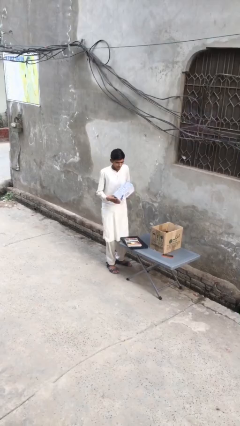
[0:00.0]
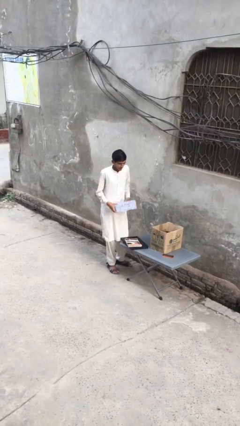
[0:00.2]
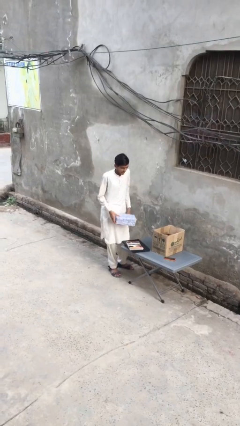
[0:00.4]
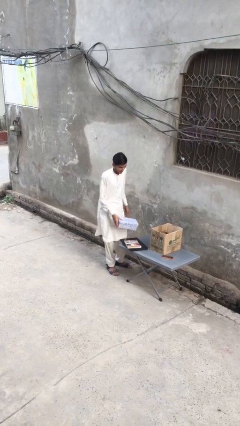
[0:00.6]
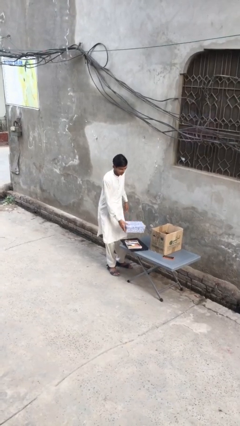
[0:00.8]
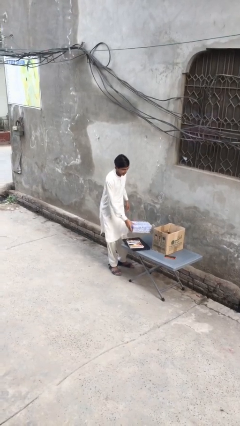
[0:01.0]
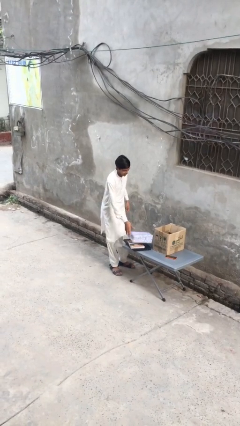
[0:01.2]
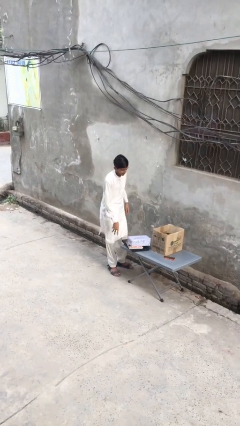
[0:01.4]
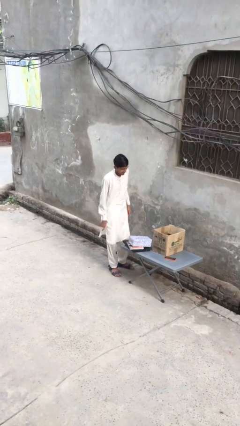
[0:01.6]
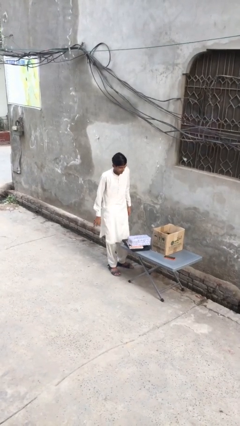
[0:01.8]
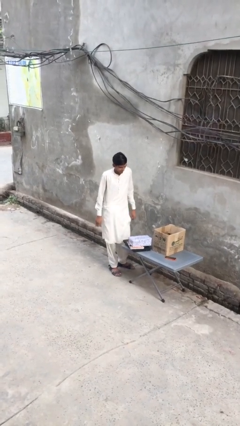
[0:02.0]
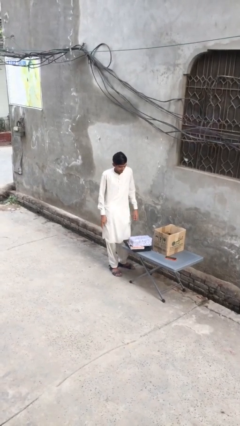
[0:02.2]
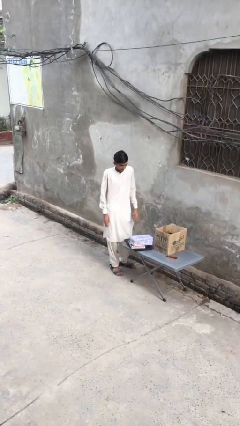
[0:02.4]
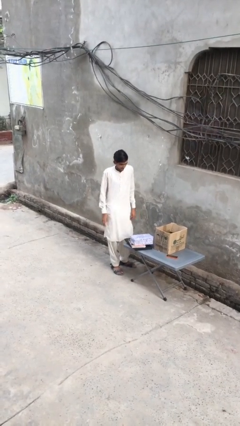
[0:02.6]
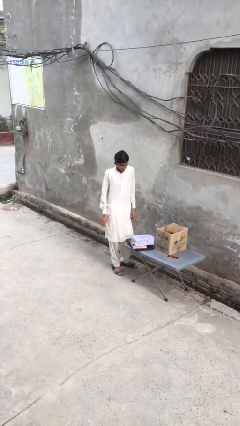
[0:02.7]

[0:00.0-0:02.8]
person puts down object on table

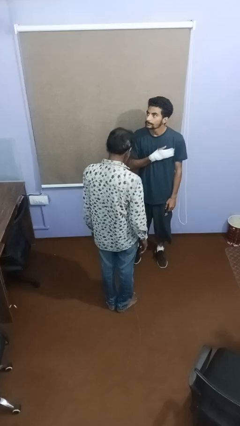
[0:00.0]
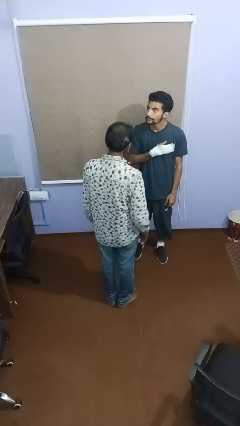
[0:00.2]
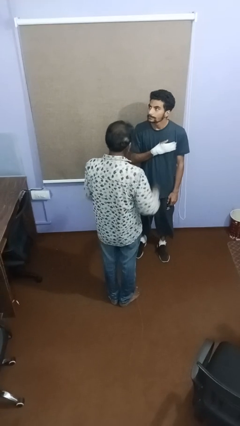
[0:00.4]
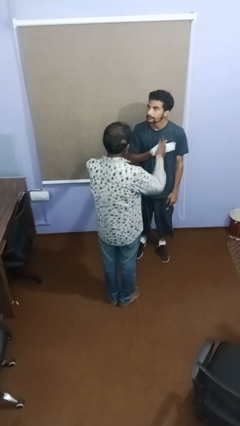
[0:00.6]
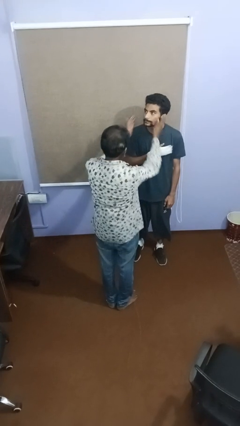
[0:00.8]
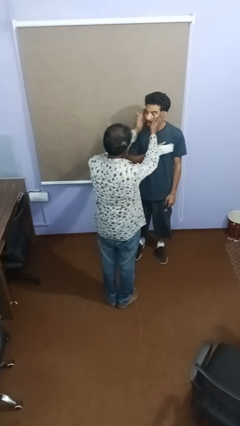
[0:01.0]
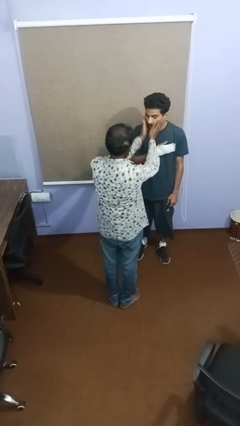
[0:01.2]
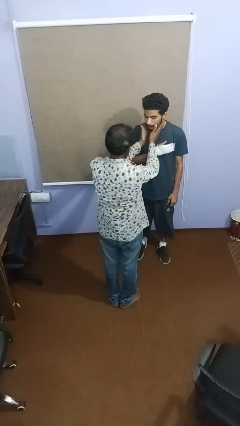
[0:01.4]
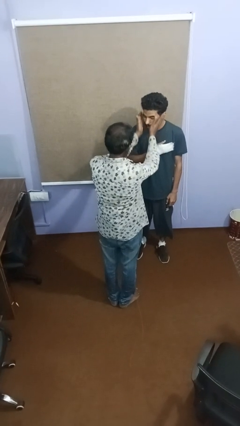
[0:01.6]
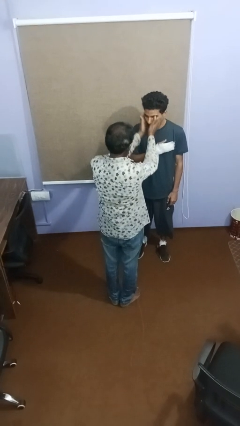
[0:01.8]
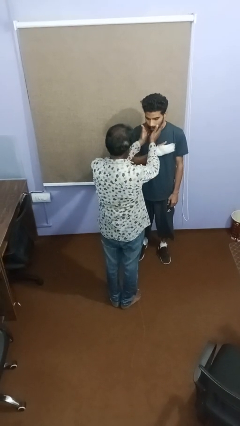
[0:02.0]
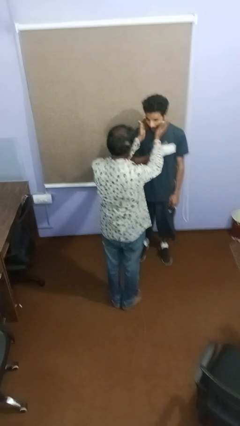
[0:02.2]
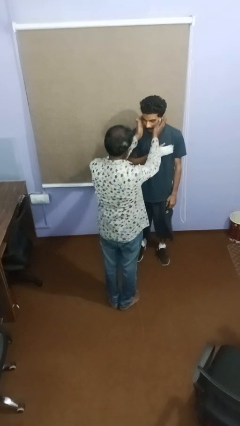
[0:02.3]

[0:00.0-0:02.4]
person touches face of person

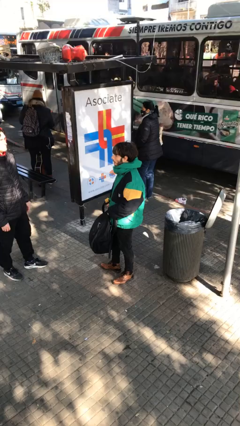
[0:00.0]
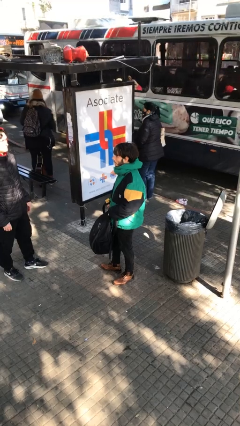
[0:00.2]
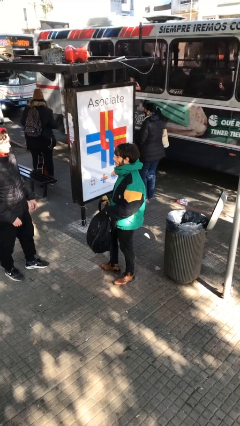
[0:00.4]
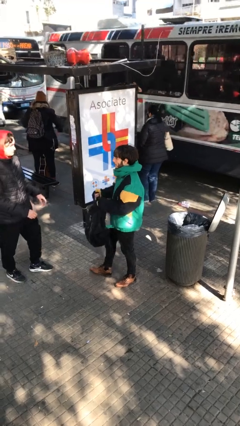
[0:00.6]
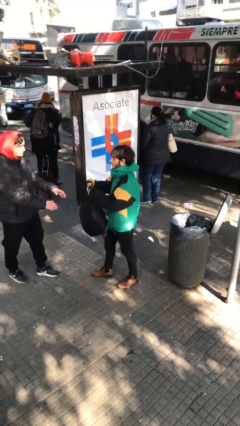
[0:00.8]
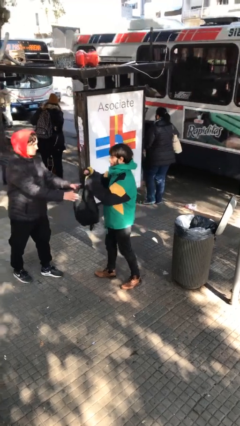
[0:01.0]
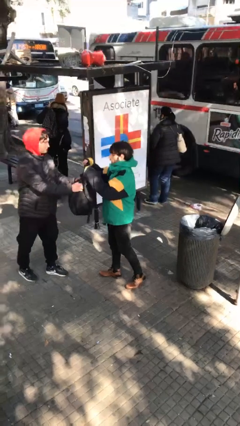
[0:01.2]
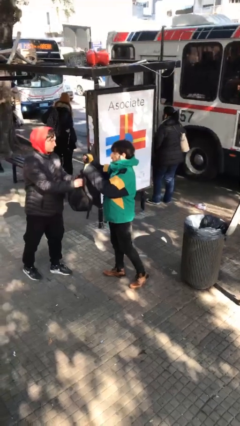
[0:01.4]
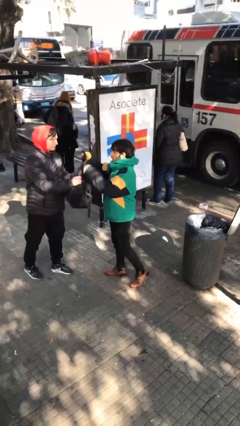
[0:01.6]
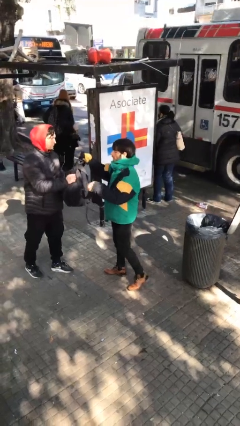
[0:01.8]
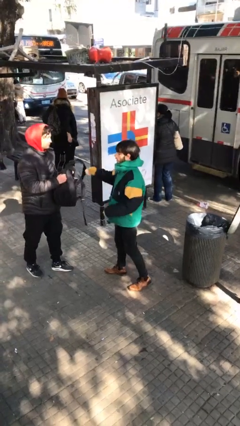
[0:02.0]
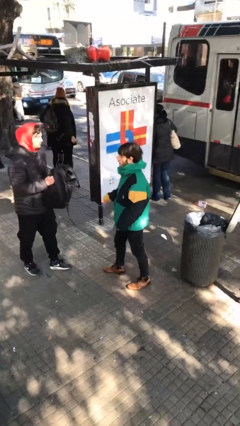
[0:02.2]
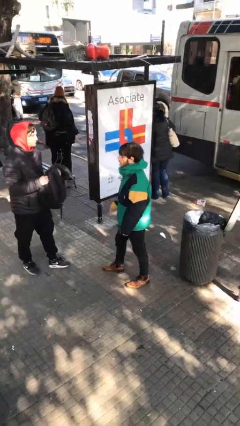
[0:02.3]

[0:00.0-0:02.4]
person transfers object to person

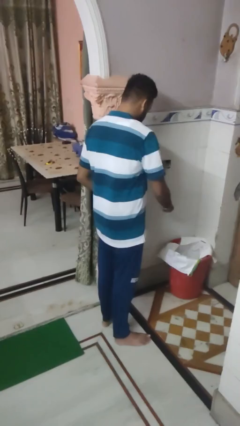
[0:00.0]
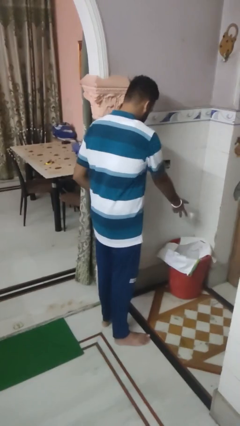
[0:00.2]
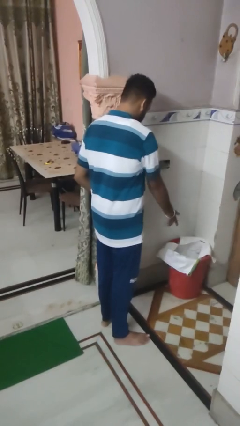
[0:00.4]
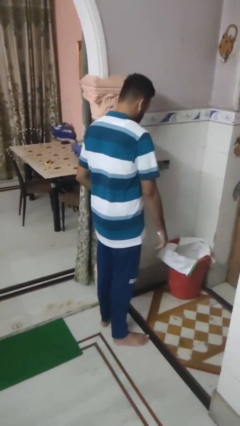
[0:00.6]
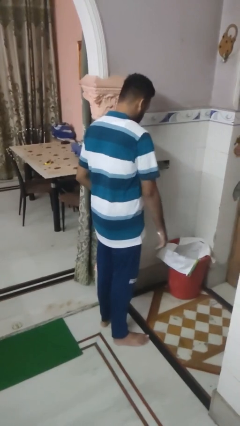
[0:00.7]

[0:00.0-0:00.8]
person discards trash

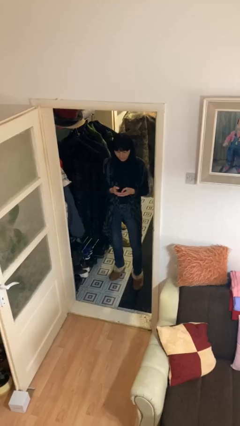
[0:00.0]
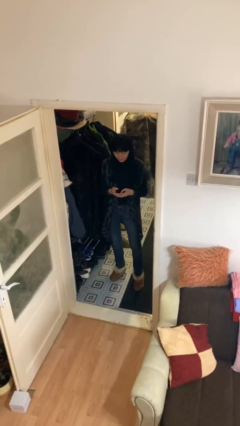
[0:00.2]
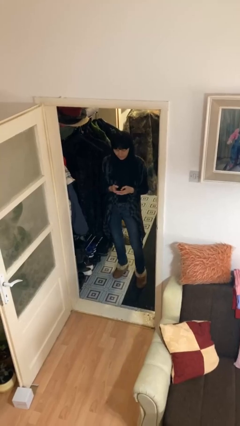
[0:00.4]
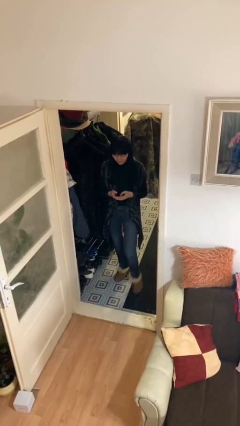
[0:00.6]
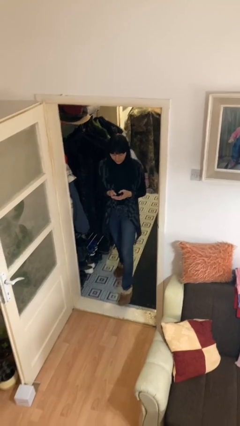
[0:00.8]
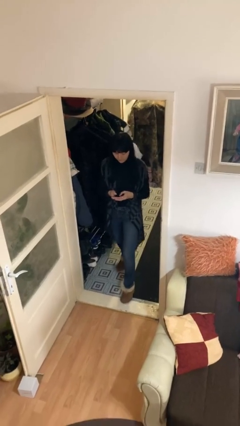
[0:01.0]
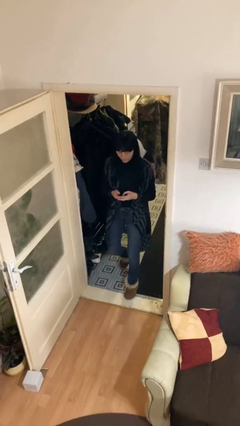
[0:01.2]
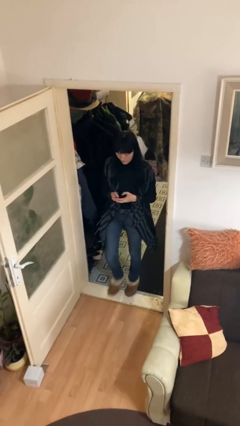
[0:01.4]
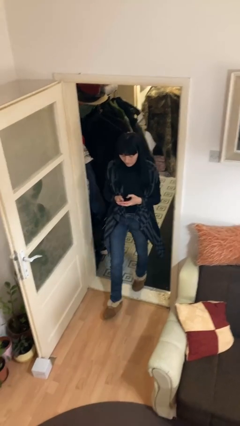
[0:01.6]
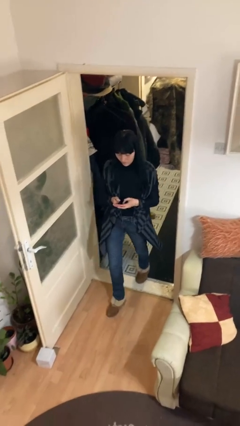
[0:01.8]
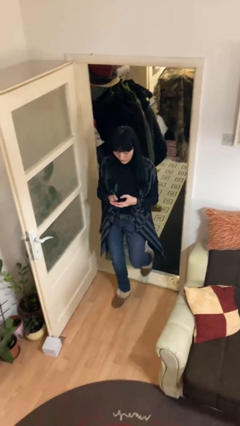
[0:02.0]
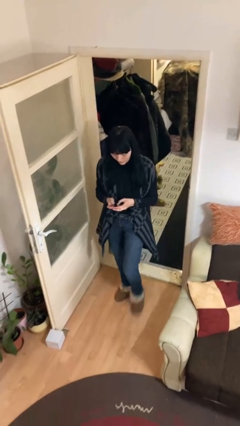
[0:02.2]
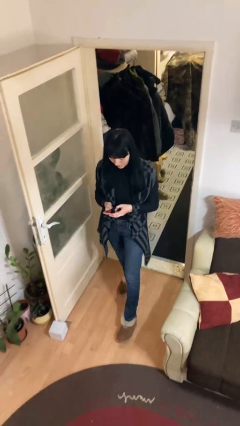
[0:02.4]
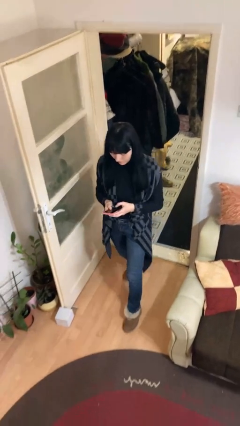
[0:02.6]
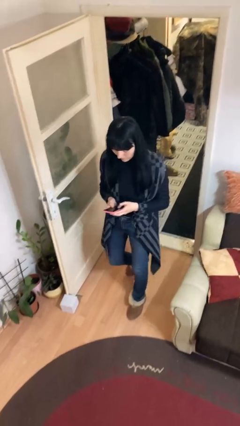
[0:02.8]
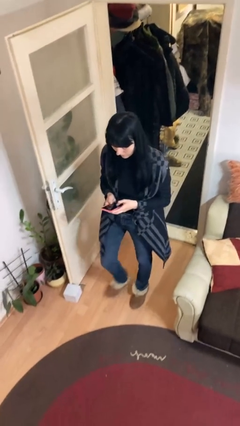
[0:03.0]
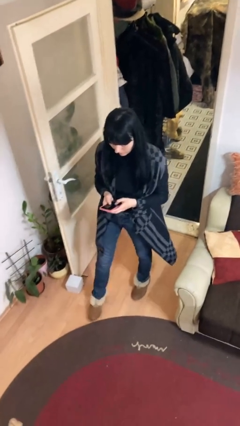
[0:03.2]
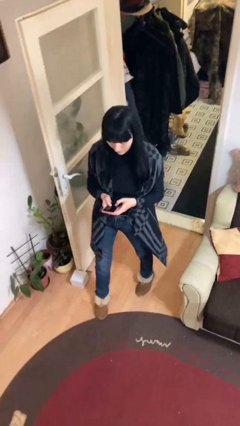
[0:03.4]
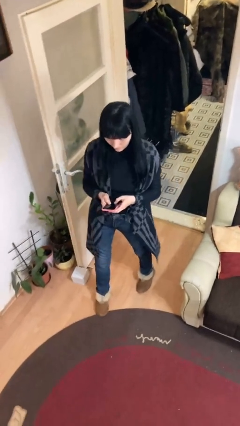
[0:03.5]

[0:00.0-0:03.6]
person enters scene through structure

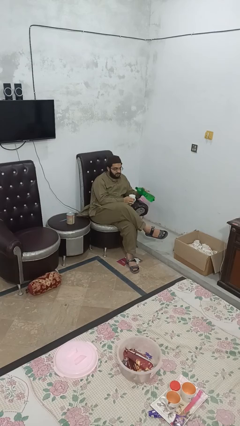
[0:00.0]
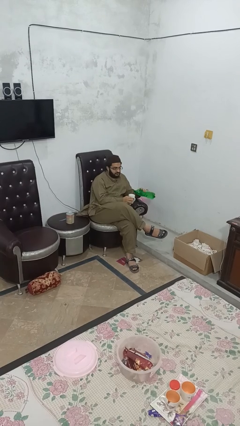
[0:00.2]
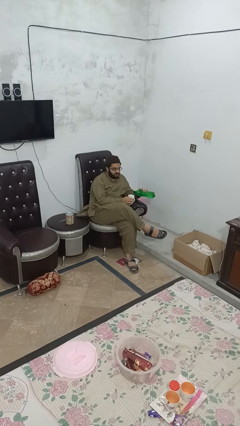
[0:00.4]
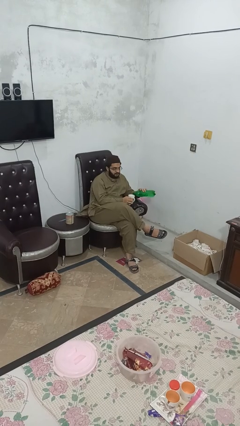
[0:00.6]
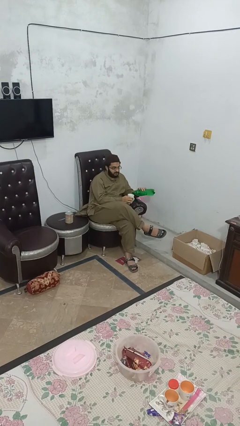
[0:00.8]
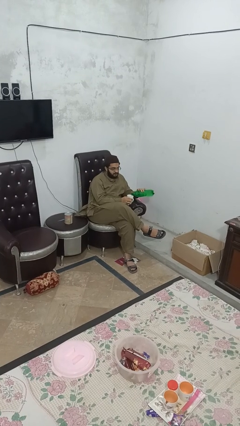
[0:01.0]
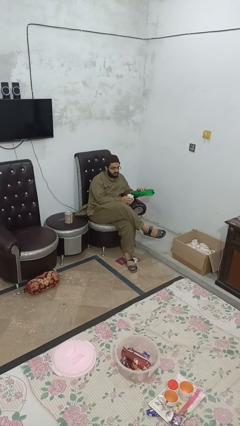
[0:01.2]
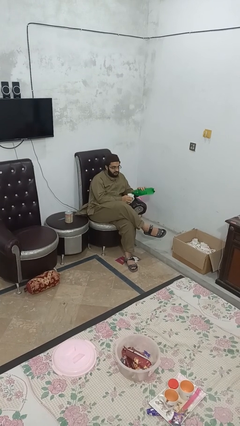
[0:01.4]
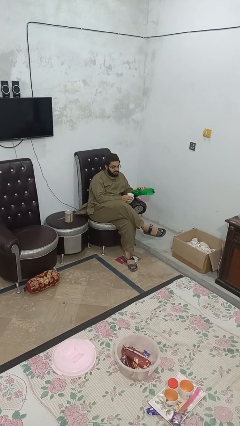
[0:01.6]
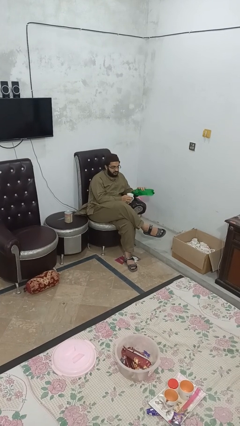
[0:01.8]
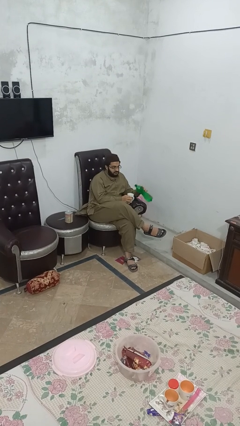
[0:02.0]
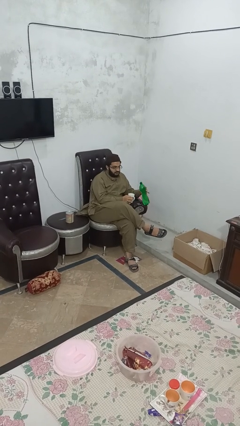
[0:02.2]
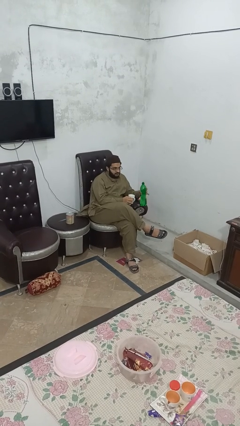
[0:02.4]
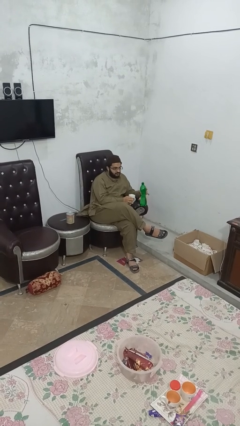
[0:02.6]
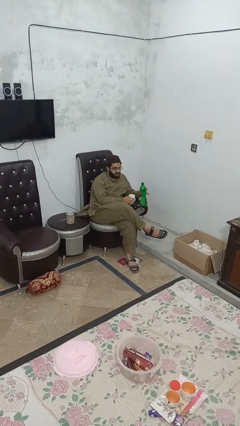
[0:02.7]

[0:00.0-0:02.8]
person pours liquid into cup

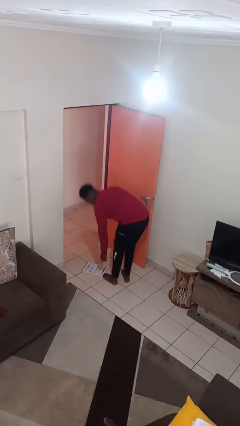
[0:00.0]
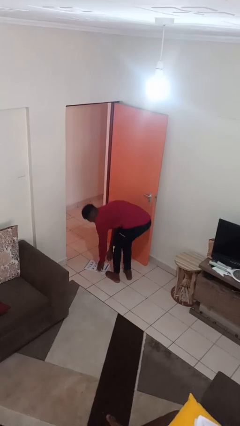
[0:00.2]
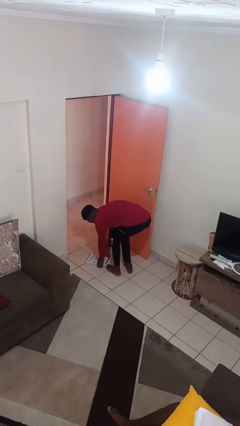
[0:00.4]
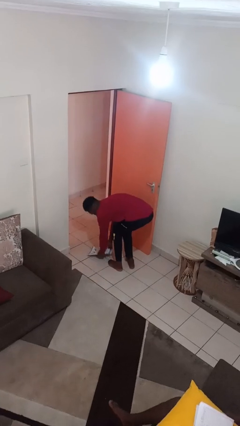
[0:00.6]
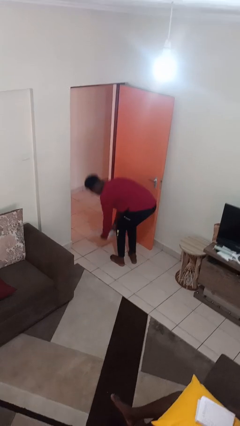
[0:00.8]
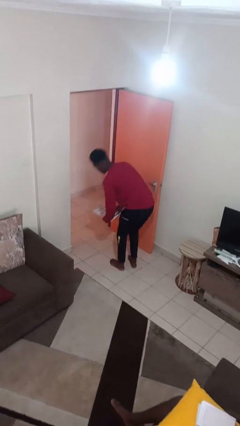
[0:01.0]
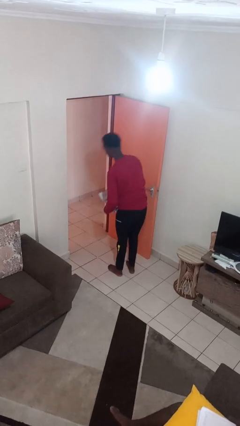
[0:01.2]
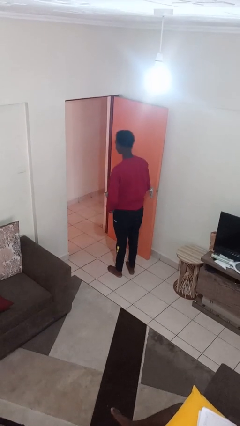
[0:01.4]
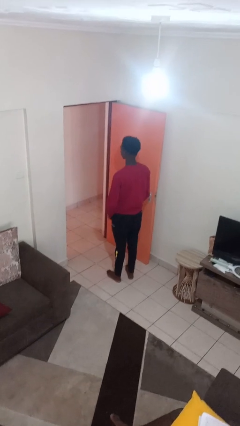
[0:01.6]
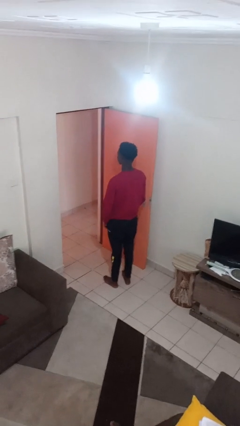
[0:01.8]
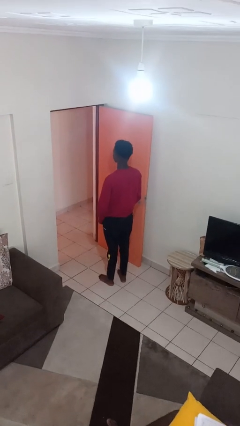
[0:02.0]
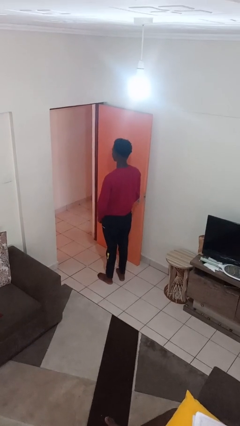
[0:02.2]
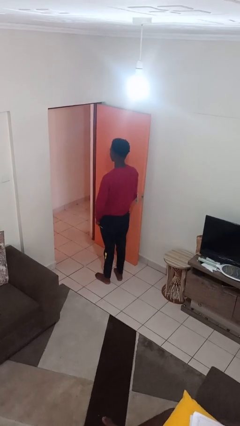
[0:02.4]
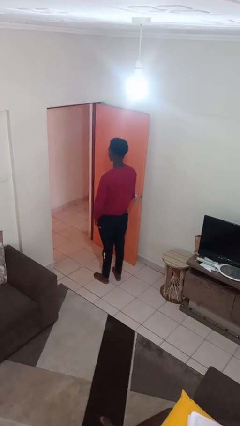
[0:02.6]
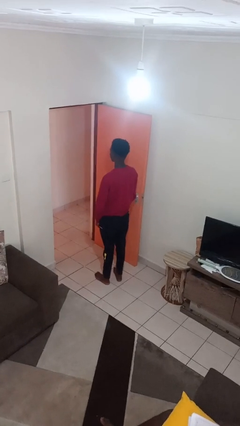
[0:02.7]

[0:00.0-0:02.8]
person picks up object from floor
